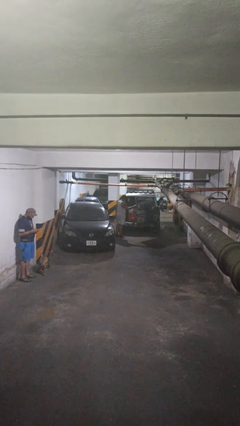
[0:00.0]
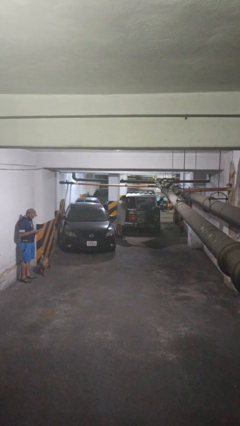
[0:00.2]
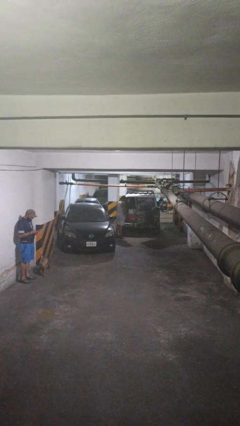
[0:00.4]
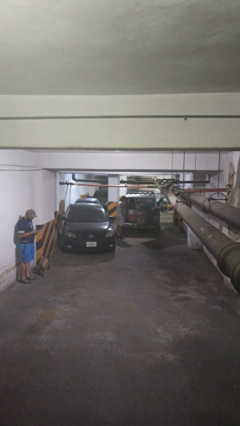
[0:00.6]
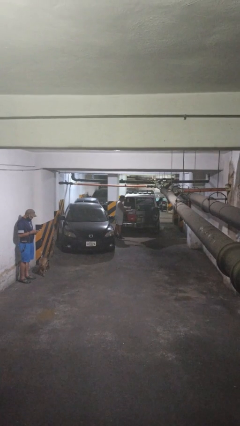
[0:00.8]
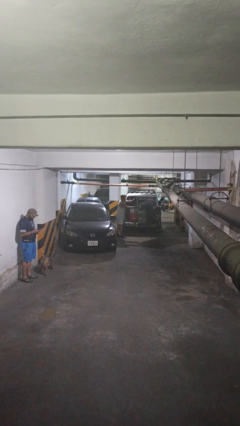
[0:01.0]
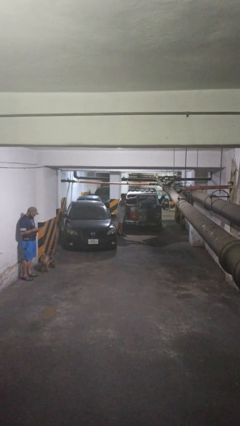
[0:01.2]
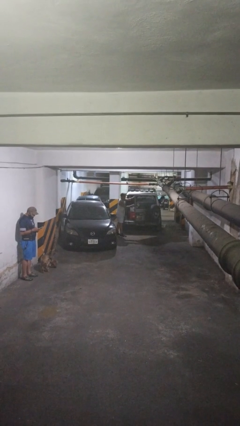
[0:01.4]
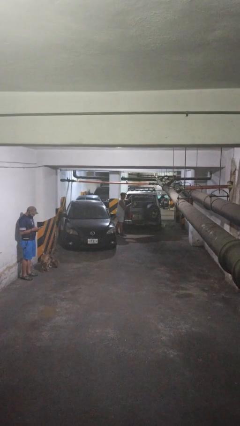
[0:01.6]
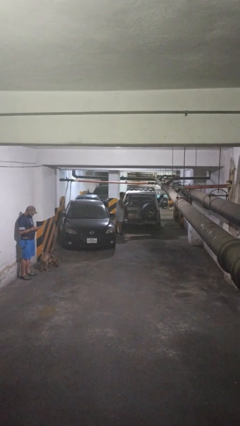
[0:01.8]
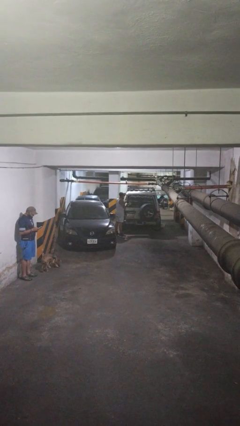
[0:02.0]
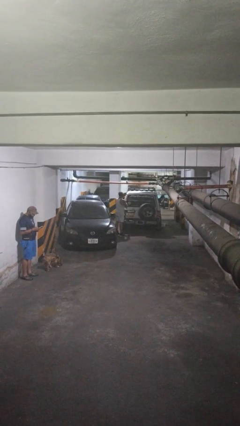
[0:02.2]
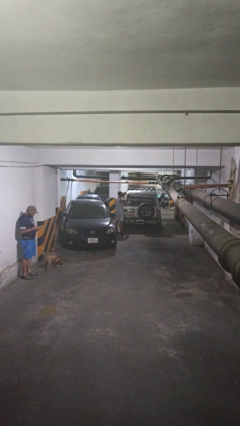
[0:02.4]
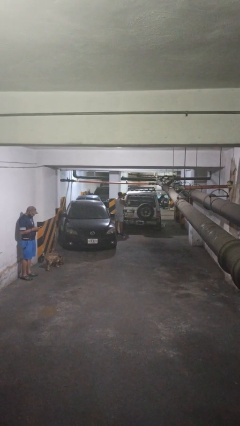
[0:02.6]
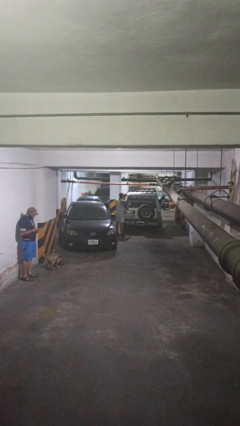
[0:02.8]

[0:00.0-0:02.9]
person closes car trunk

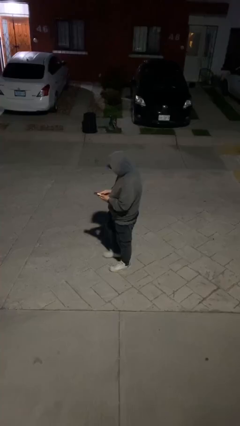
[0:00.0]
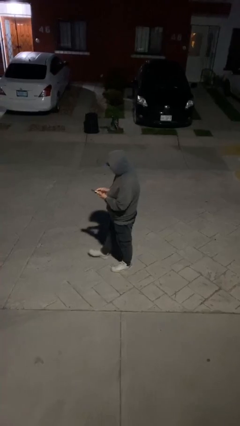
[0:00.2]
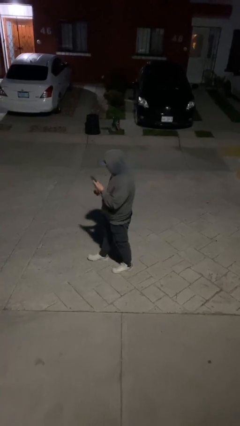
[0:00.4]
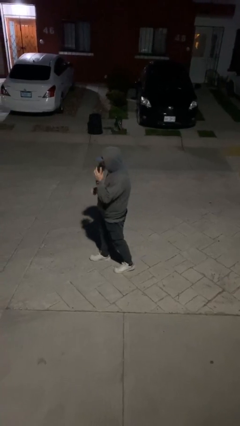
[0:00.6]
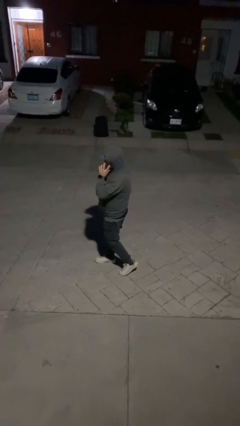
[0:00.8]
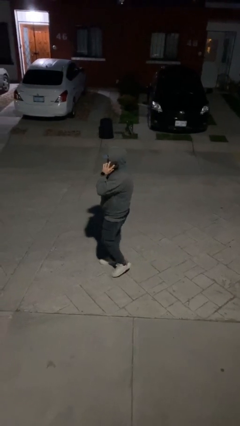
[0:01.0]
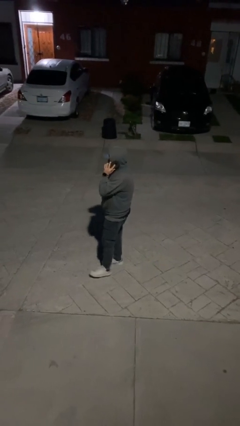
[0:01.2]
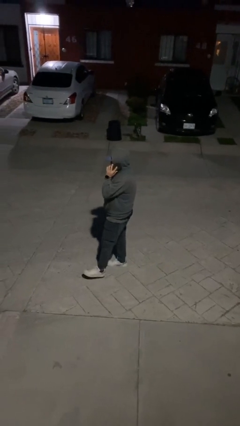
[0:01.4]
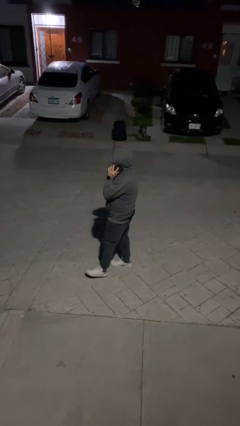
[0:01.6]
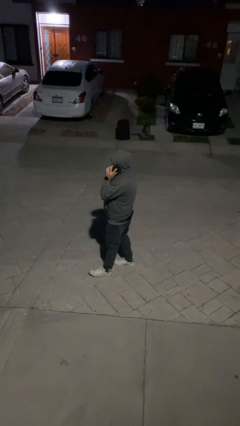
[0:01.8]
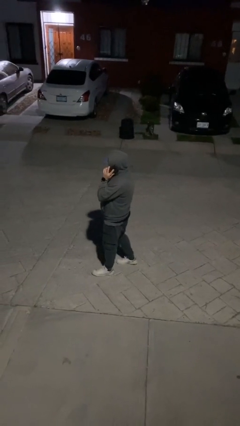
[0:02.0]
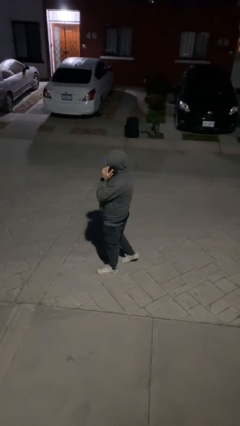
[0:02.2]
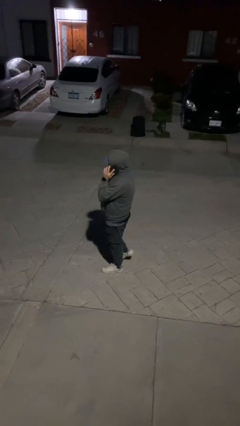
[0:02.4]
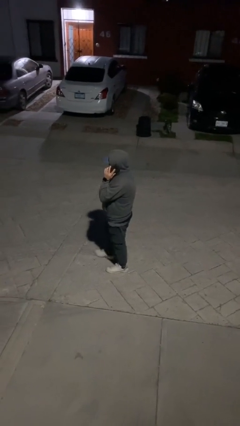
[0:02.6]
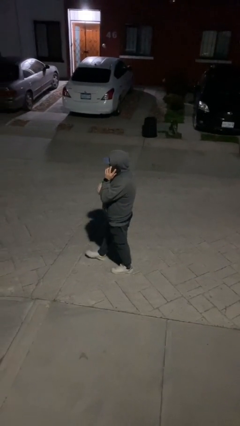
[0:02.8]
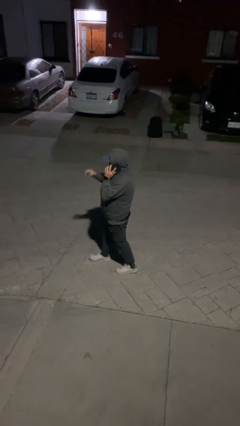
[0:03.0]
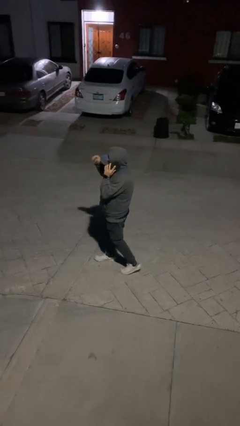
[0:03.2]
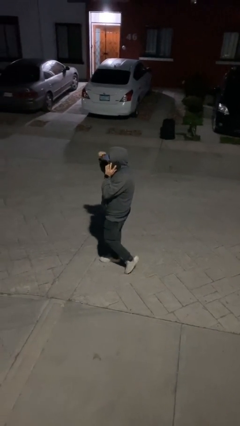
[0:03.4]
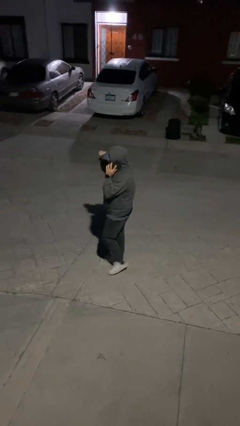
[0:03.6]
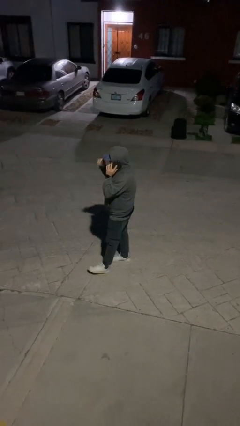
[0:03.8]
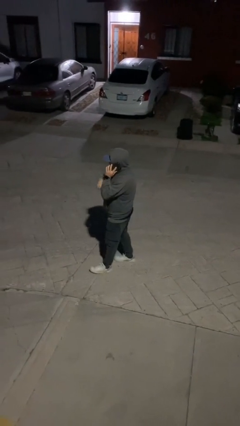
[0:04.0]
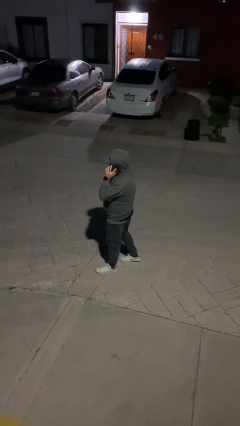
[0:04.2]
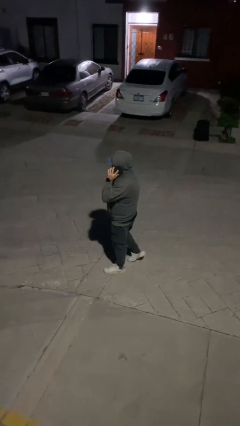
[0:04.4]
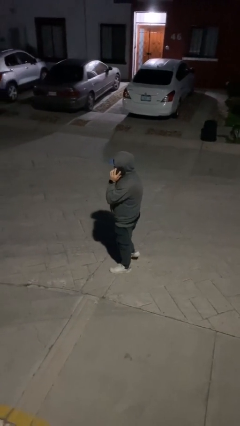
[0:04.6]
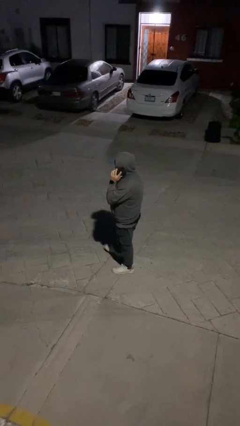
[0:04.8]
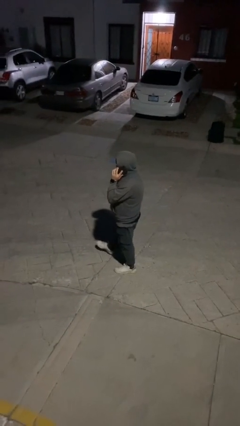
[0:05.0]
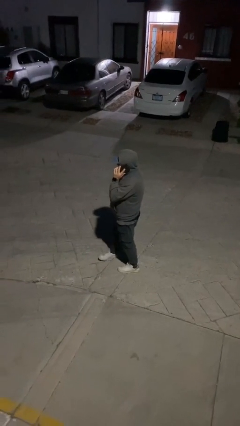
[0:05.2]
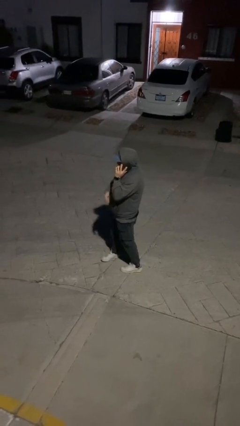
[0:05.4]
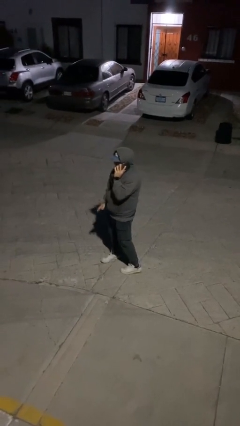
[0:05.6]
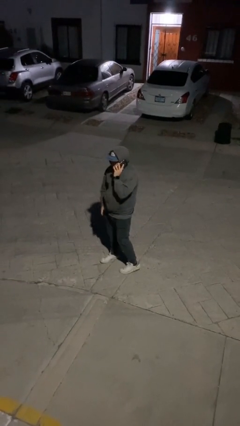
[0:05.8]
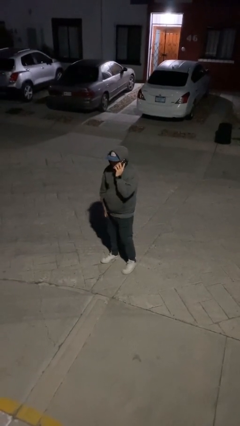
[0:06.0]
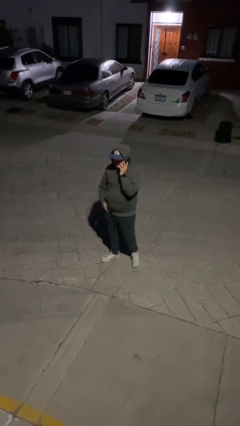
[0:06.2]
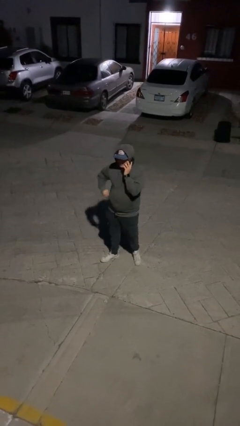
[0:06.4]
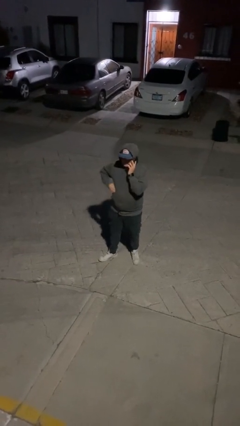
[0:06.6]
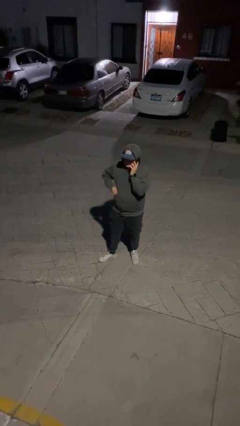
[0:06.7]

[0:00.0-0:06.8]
person talks on phone

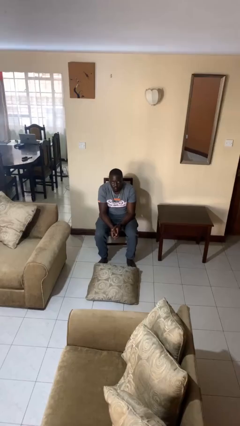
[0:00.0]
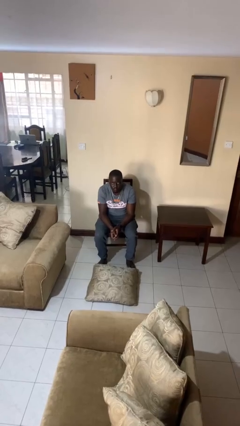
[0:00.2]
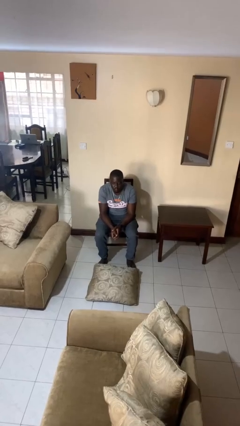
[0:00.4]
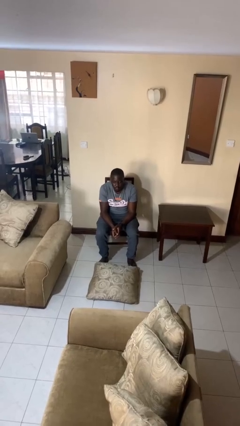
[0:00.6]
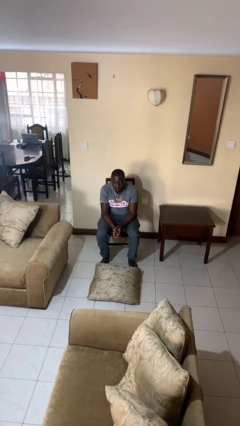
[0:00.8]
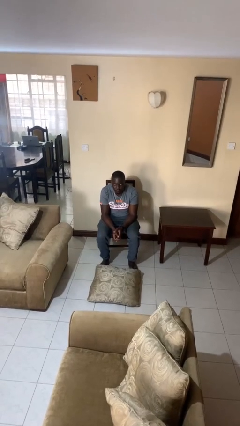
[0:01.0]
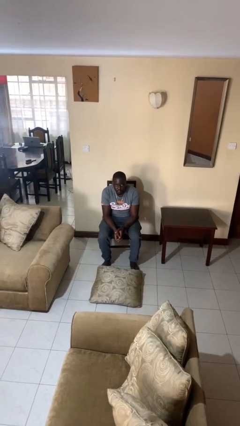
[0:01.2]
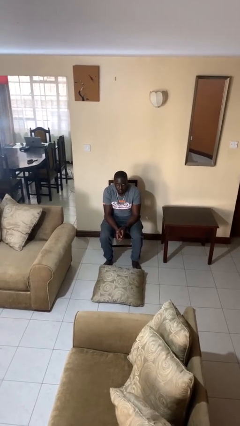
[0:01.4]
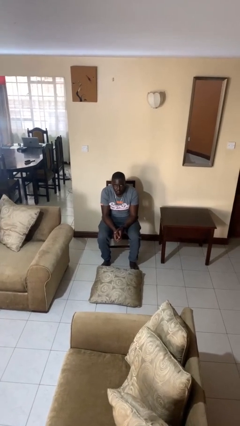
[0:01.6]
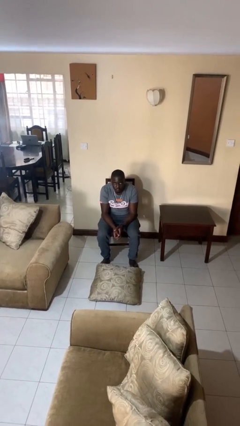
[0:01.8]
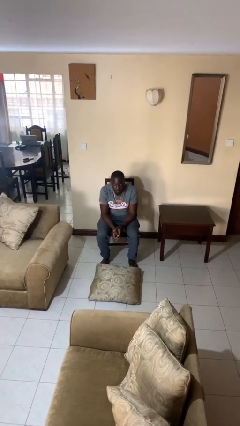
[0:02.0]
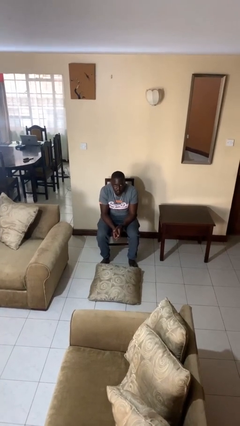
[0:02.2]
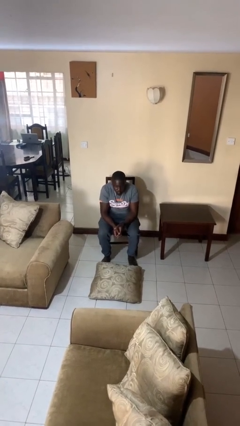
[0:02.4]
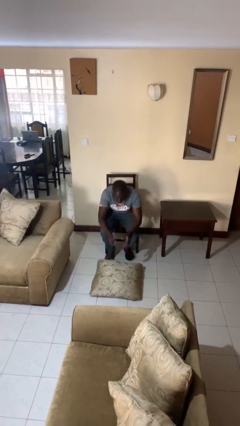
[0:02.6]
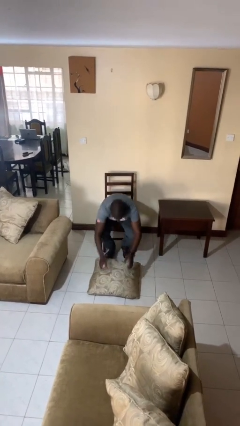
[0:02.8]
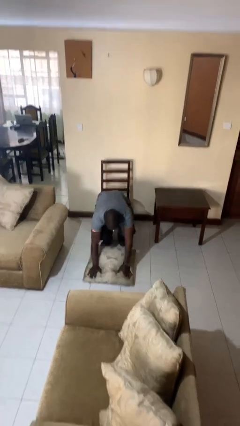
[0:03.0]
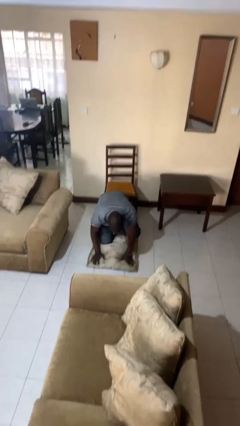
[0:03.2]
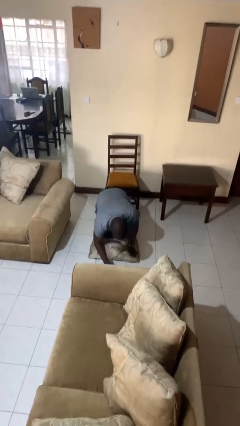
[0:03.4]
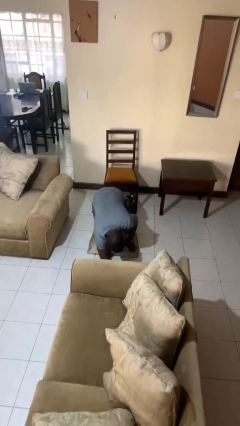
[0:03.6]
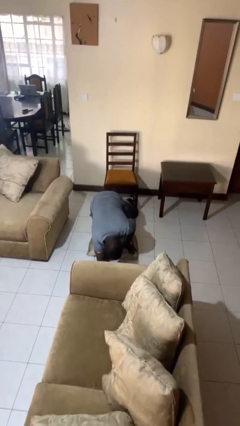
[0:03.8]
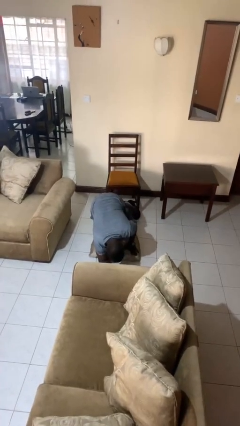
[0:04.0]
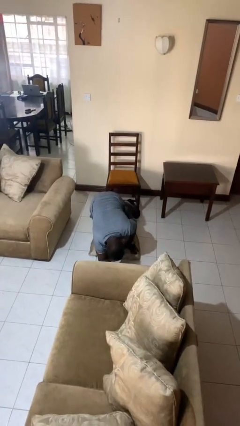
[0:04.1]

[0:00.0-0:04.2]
person falls from chair

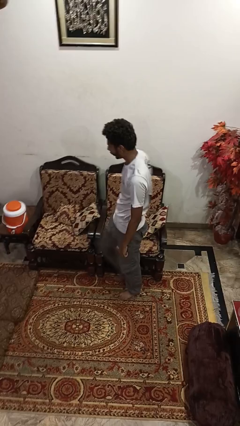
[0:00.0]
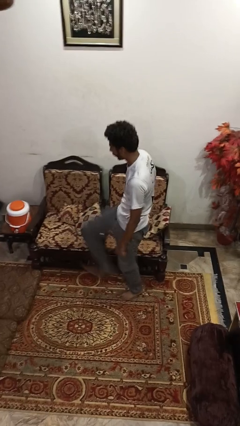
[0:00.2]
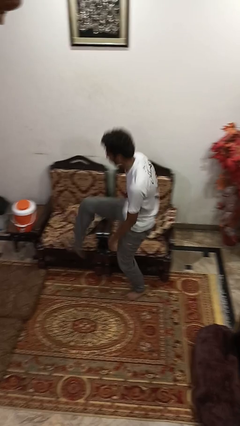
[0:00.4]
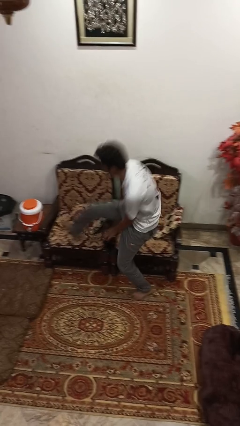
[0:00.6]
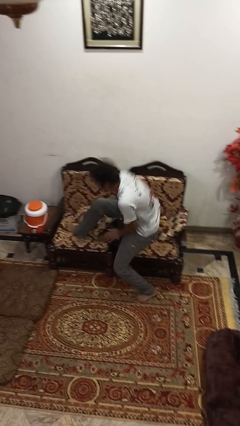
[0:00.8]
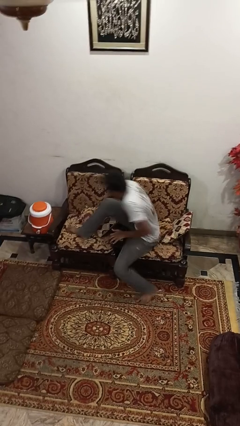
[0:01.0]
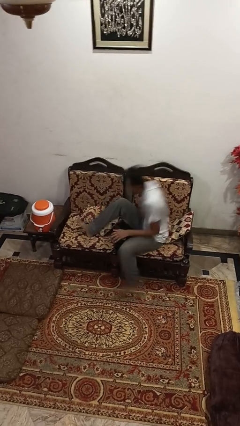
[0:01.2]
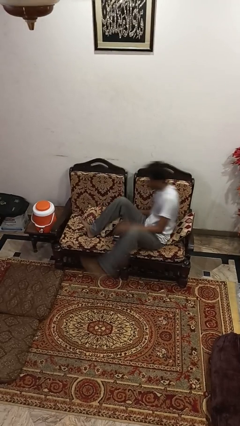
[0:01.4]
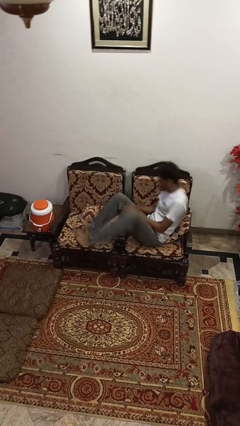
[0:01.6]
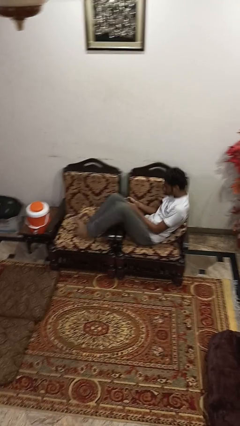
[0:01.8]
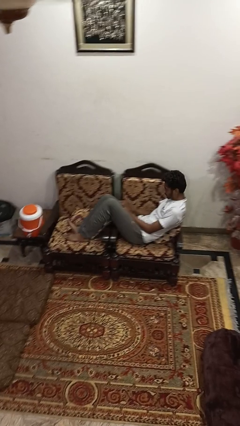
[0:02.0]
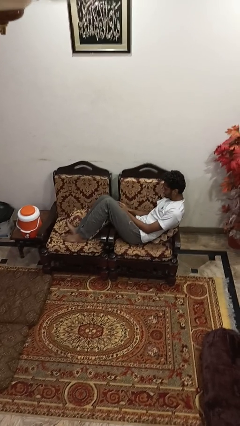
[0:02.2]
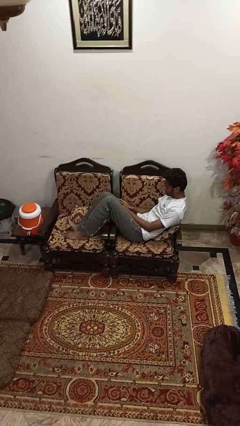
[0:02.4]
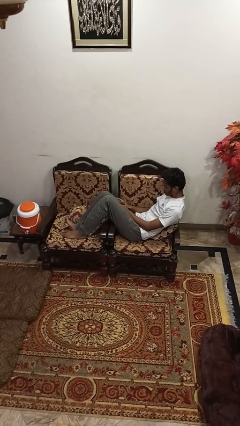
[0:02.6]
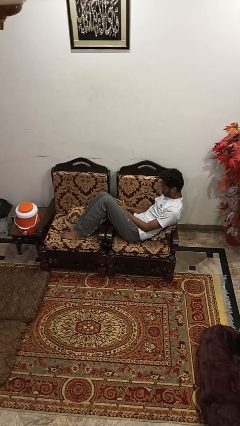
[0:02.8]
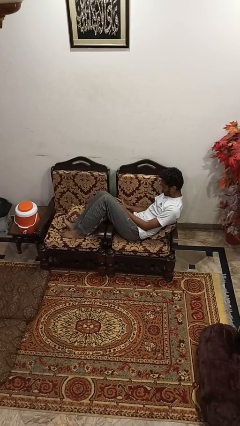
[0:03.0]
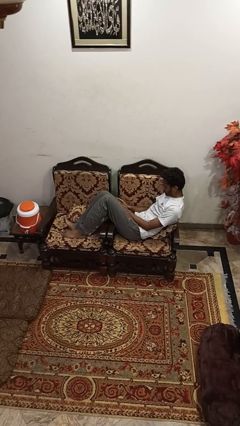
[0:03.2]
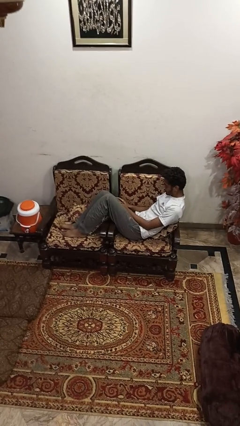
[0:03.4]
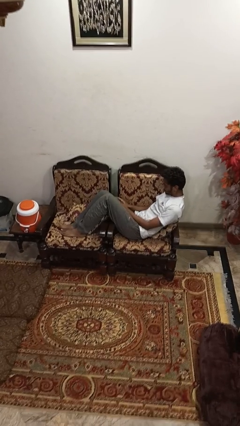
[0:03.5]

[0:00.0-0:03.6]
person lies down on couch

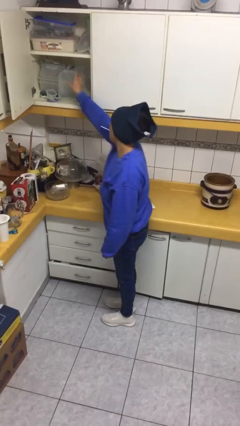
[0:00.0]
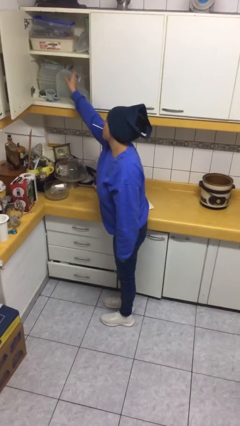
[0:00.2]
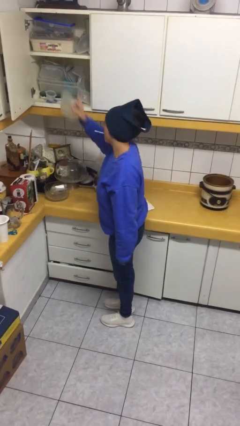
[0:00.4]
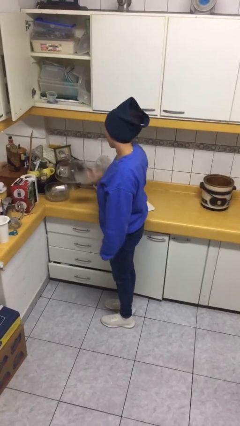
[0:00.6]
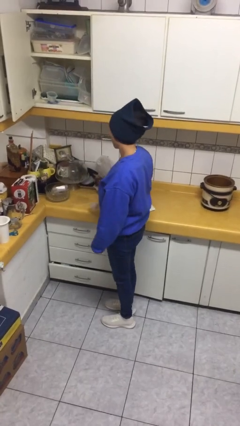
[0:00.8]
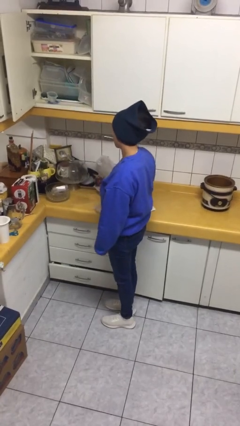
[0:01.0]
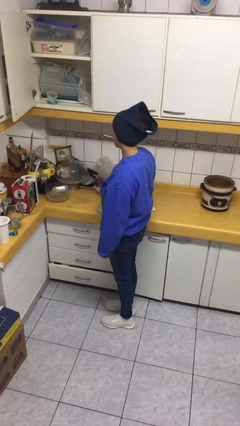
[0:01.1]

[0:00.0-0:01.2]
person takes object from cabinet
